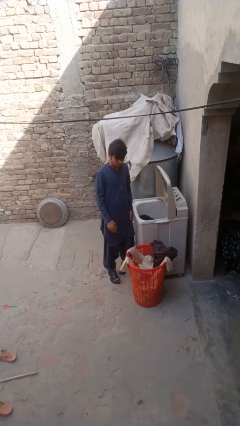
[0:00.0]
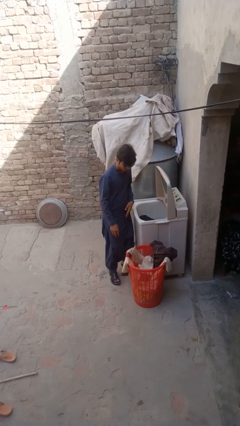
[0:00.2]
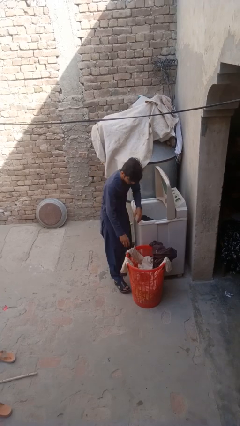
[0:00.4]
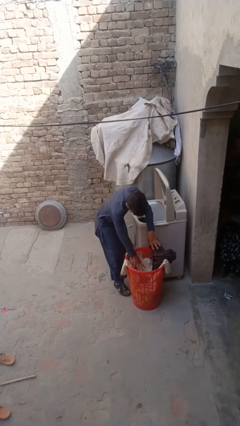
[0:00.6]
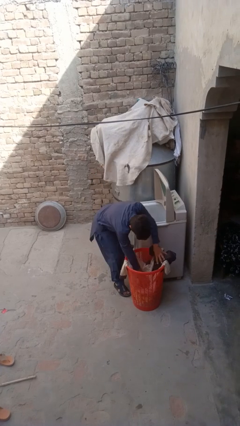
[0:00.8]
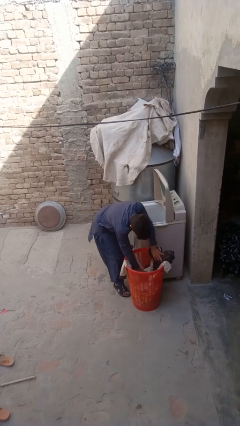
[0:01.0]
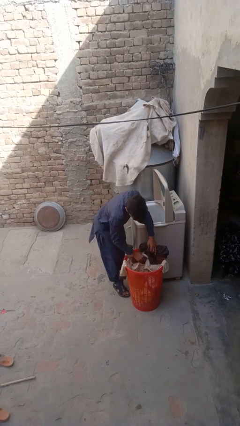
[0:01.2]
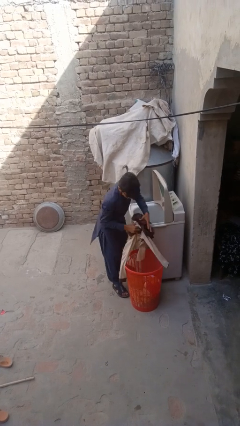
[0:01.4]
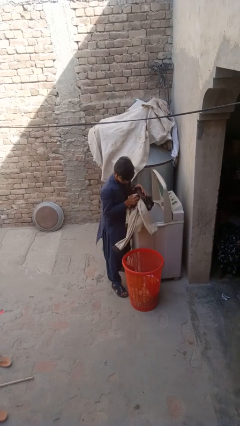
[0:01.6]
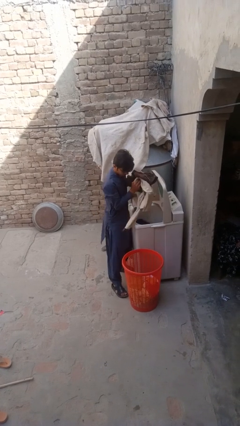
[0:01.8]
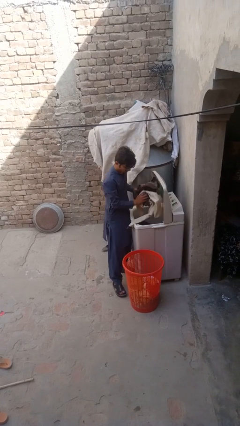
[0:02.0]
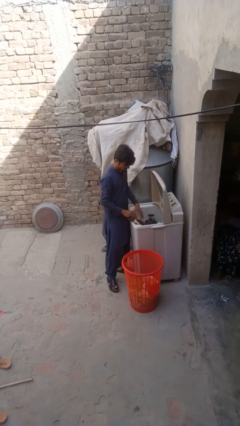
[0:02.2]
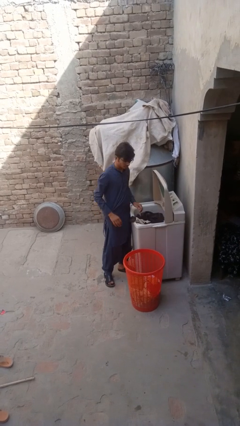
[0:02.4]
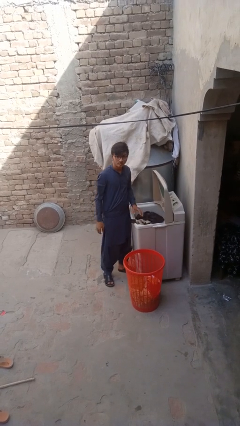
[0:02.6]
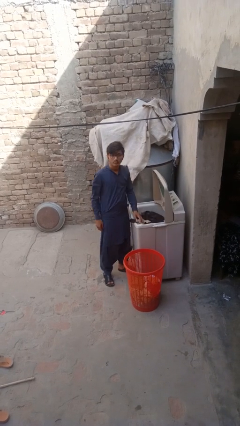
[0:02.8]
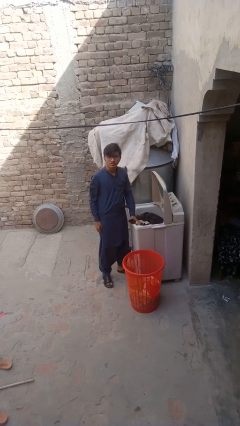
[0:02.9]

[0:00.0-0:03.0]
person loads clotheswasher

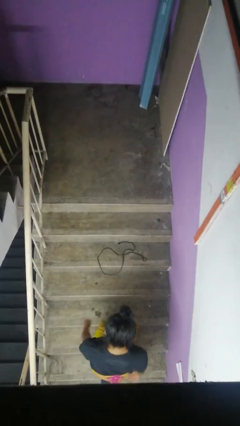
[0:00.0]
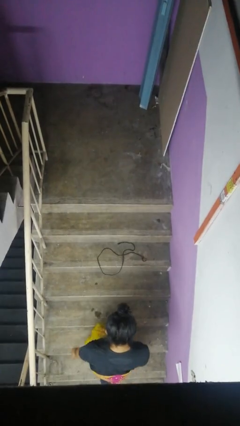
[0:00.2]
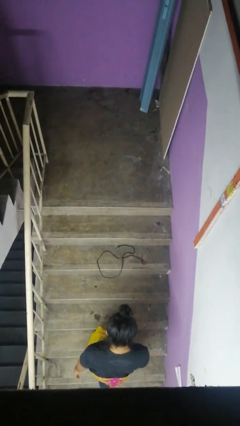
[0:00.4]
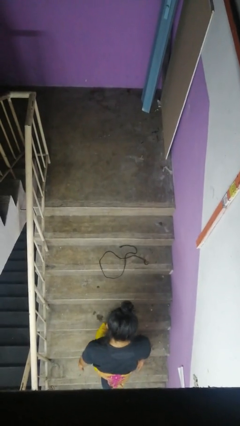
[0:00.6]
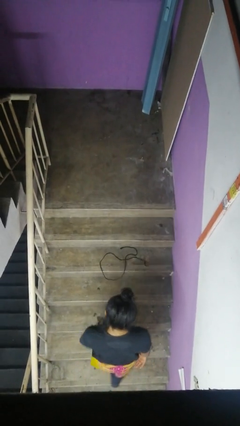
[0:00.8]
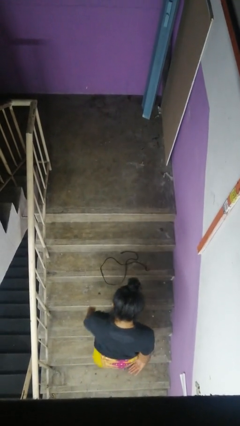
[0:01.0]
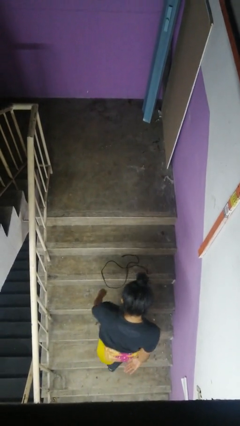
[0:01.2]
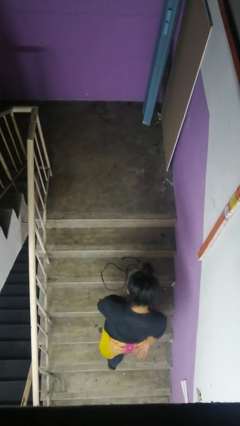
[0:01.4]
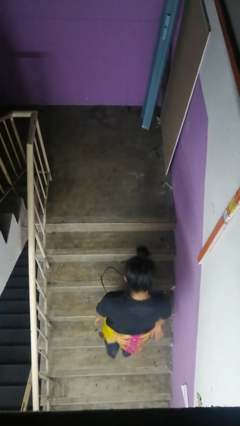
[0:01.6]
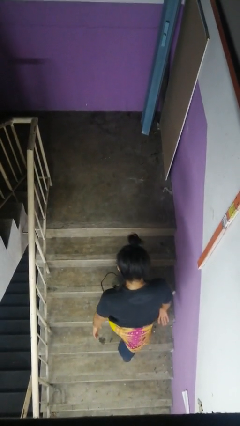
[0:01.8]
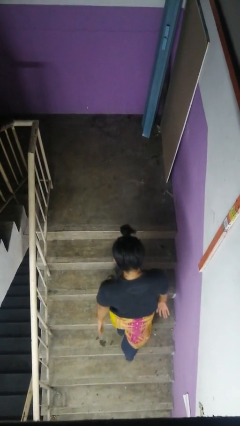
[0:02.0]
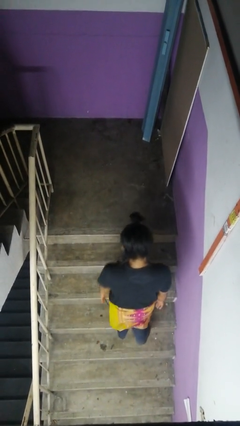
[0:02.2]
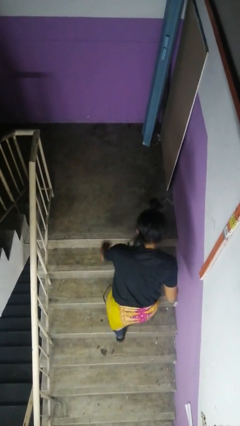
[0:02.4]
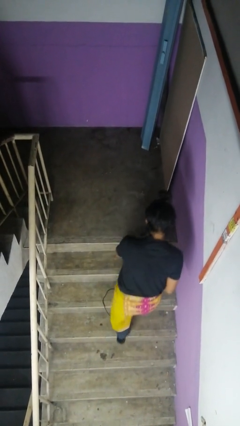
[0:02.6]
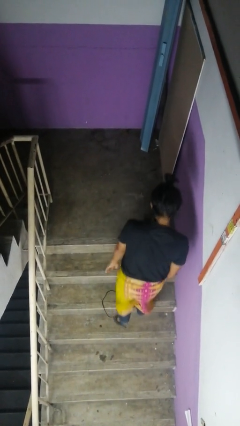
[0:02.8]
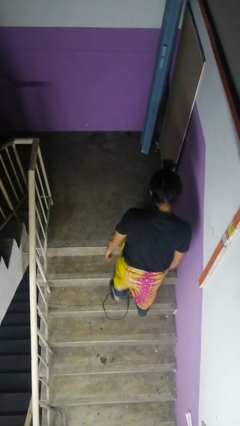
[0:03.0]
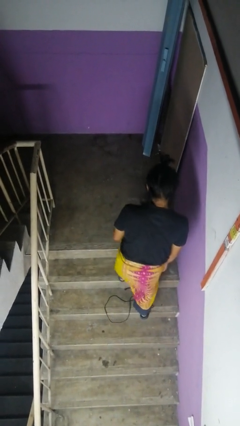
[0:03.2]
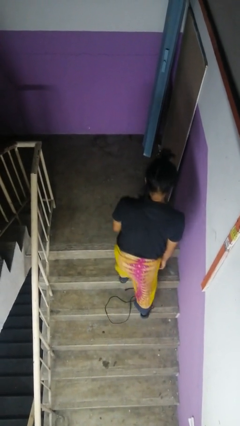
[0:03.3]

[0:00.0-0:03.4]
person climbs up stairs

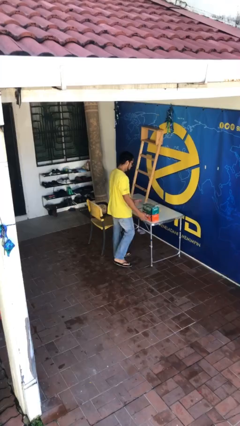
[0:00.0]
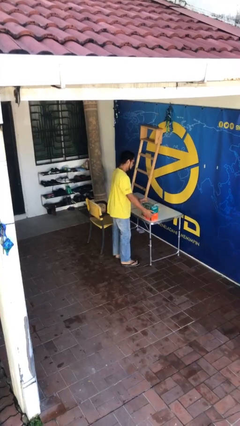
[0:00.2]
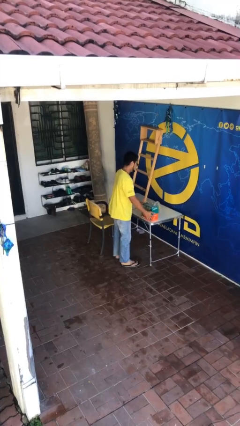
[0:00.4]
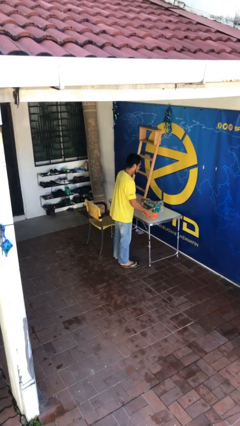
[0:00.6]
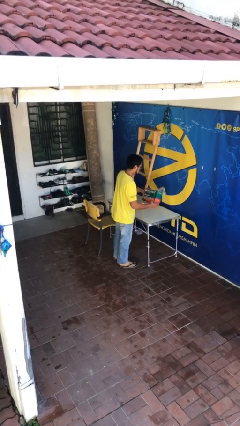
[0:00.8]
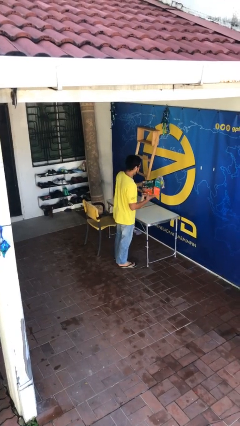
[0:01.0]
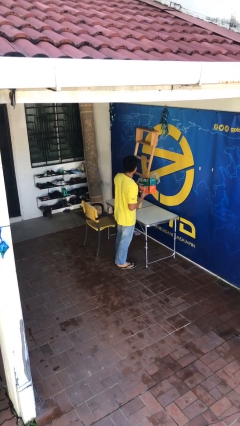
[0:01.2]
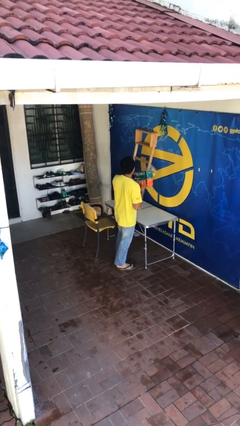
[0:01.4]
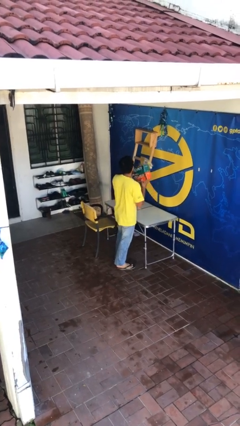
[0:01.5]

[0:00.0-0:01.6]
person picks up object from table

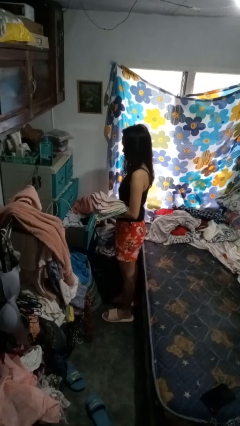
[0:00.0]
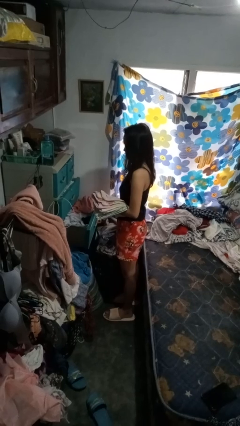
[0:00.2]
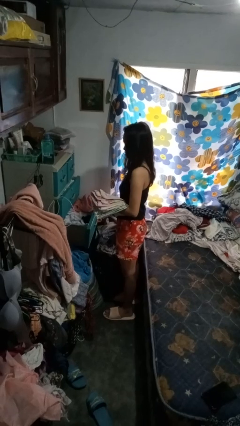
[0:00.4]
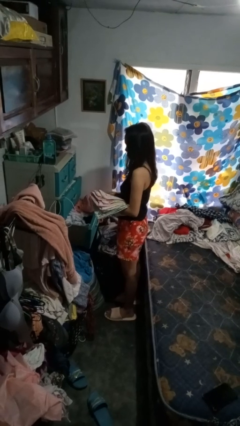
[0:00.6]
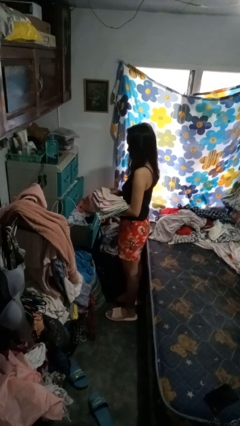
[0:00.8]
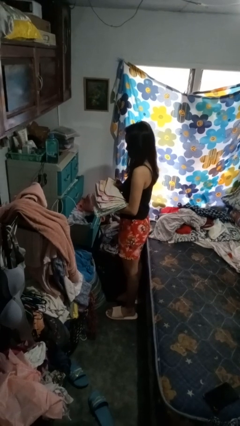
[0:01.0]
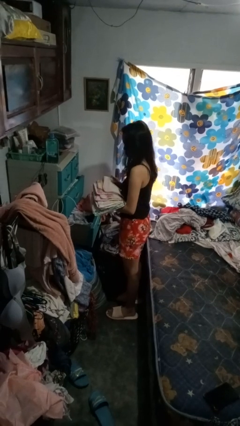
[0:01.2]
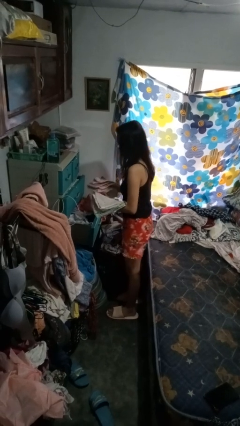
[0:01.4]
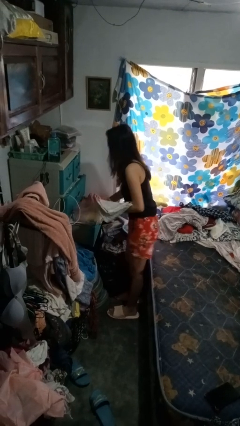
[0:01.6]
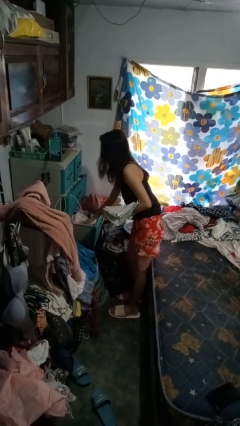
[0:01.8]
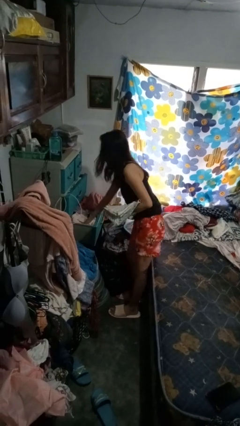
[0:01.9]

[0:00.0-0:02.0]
person puts clothes into dresser

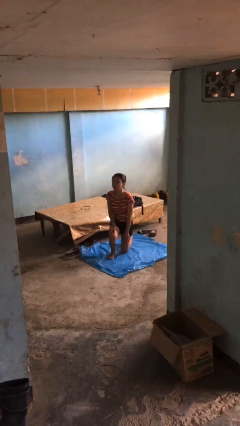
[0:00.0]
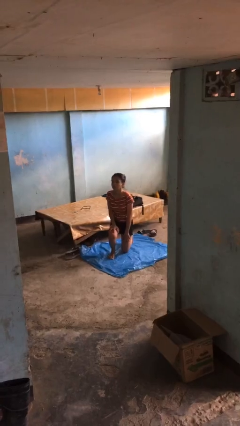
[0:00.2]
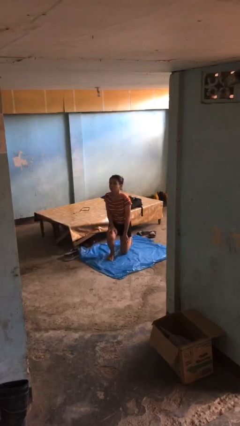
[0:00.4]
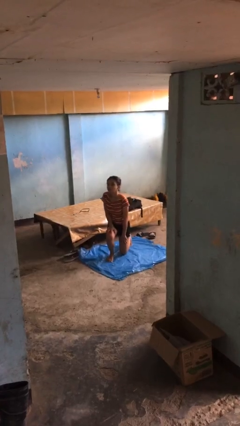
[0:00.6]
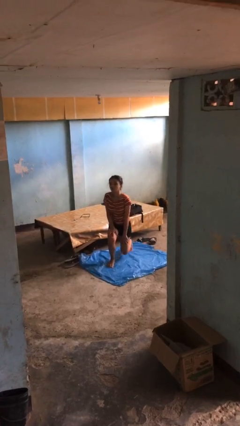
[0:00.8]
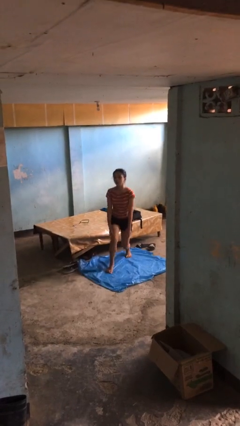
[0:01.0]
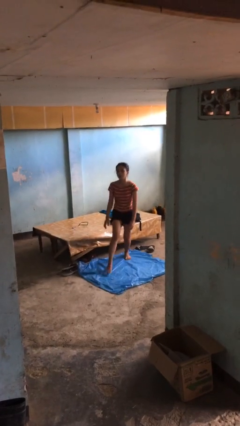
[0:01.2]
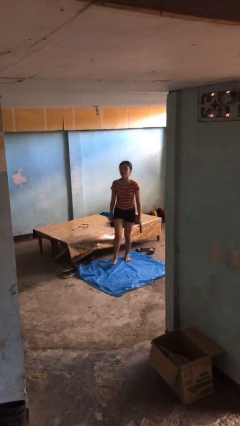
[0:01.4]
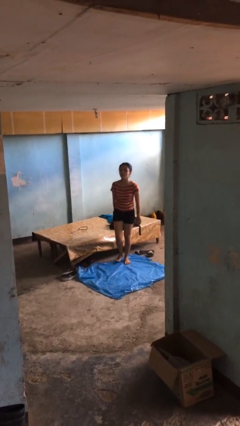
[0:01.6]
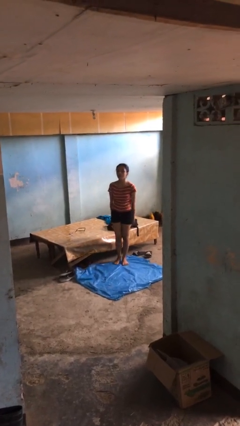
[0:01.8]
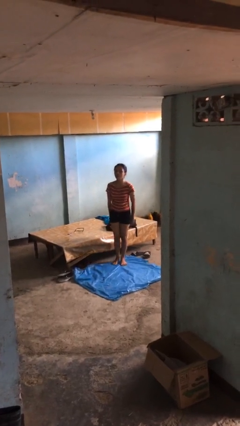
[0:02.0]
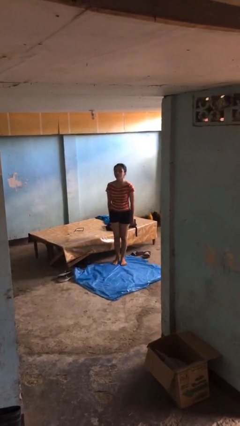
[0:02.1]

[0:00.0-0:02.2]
person stands up from floor

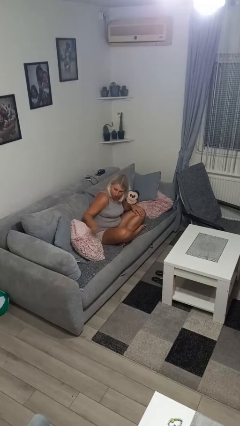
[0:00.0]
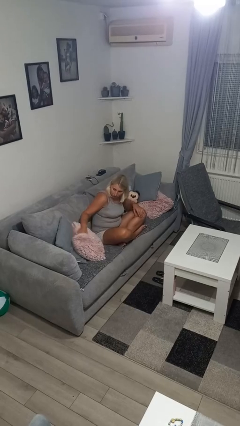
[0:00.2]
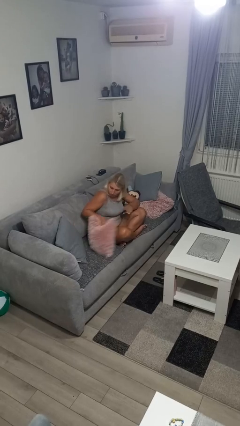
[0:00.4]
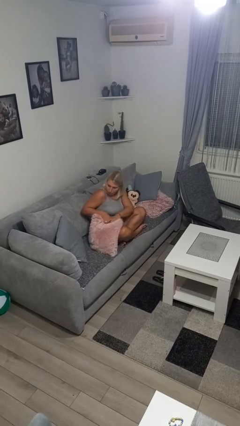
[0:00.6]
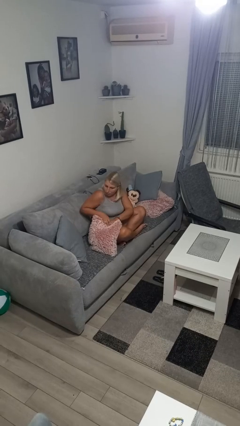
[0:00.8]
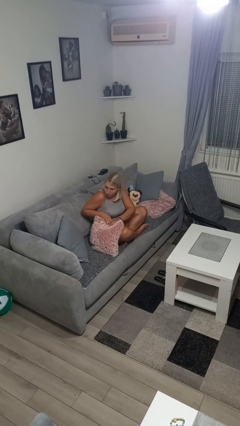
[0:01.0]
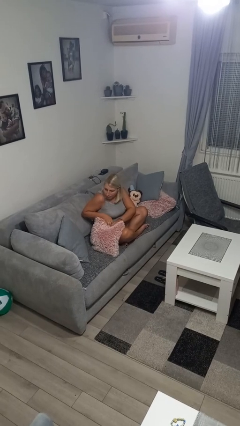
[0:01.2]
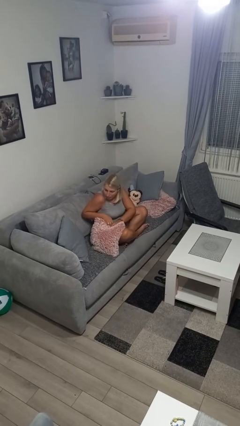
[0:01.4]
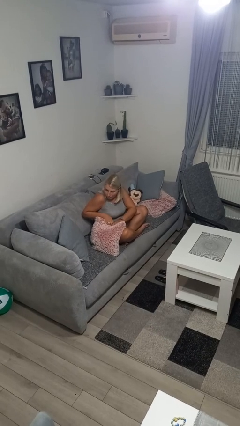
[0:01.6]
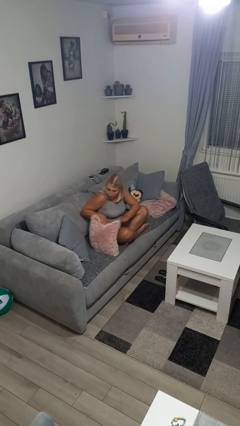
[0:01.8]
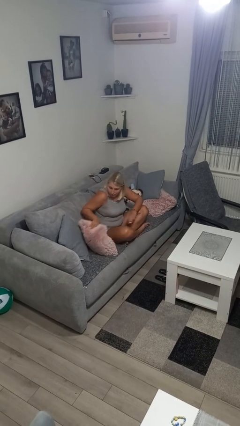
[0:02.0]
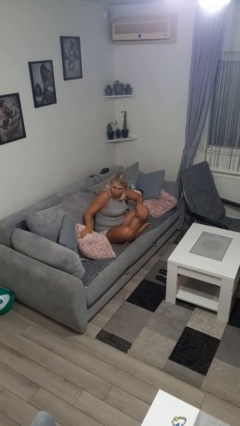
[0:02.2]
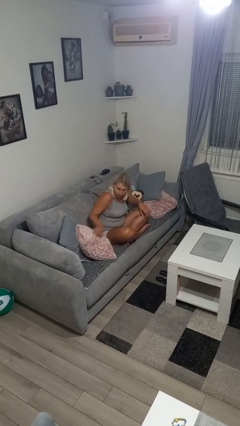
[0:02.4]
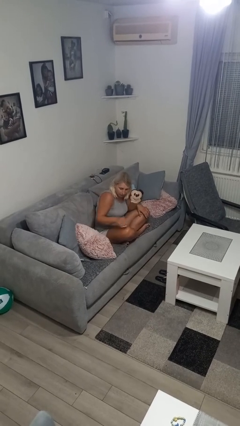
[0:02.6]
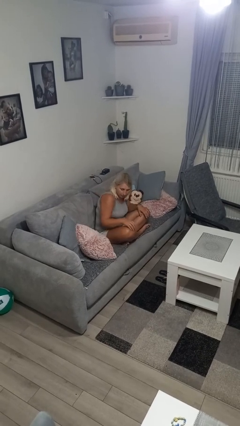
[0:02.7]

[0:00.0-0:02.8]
person searches in couch

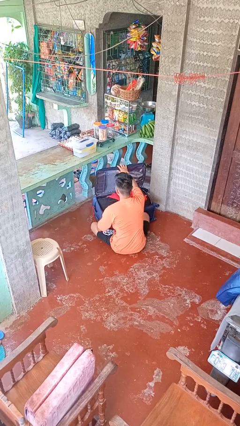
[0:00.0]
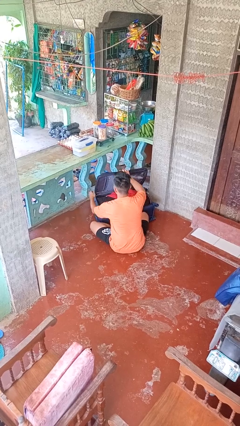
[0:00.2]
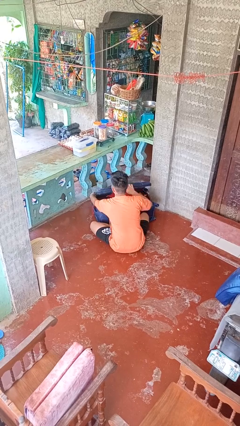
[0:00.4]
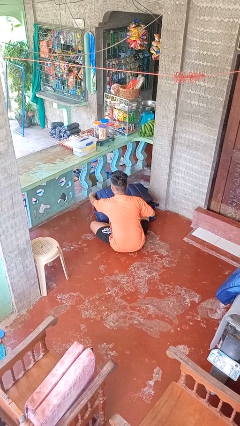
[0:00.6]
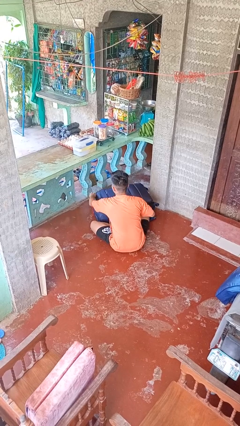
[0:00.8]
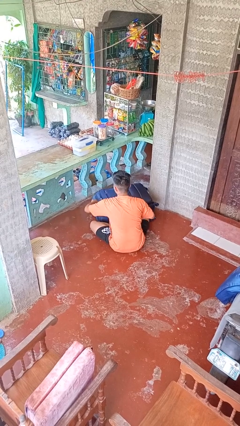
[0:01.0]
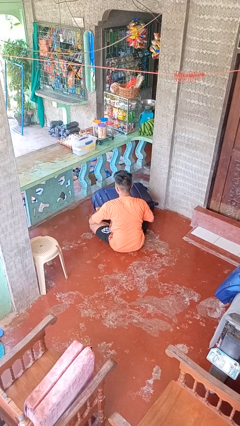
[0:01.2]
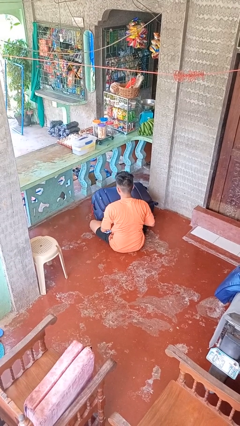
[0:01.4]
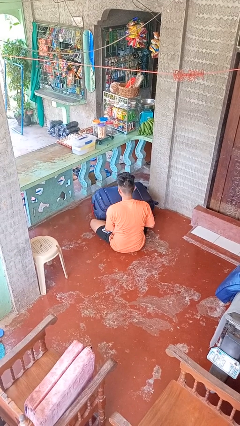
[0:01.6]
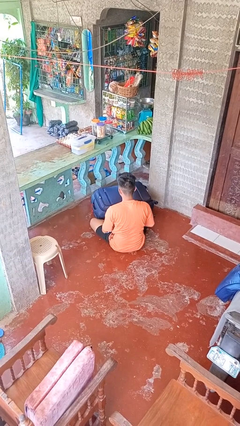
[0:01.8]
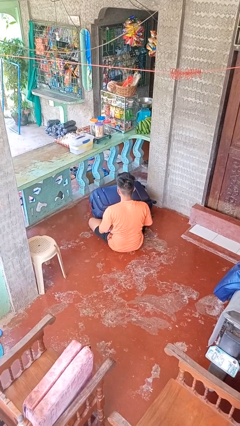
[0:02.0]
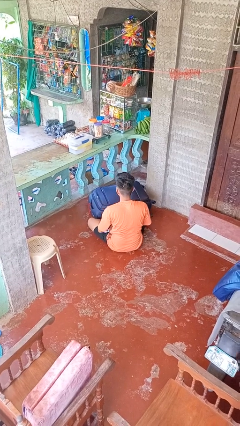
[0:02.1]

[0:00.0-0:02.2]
person closes suitcase
